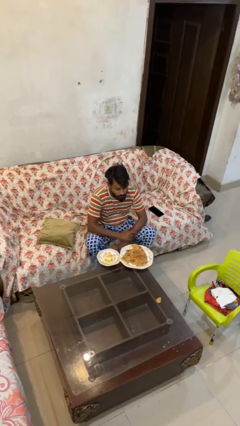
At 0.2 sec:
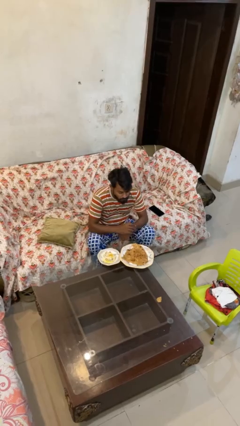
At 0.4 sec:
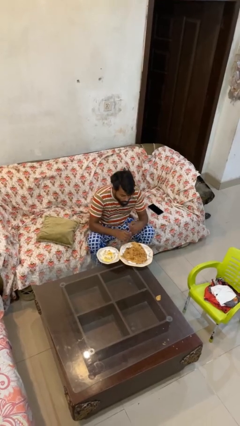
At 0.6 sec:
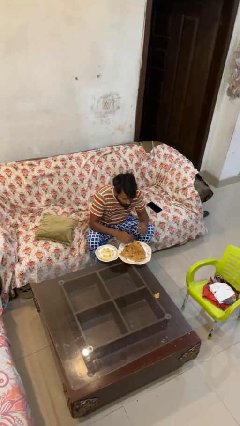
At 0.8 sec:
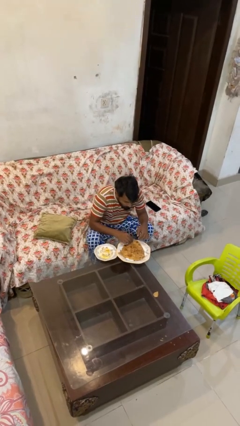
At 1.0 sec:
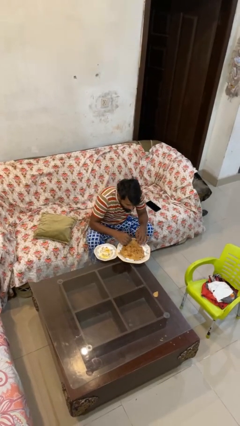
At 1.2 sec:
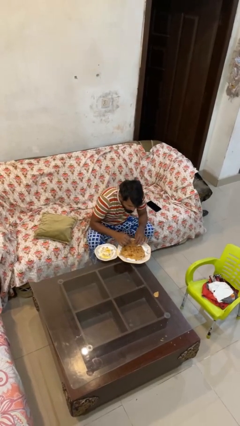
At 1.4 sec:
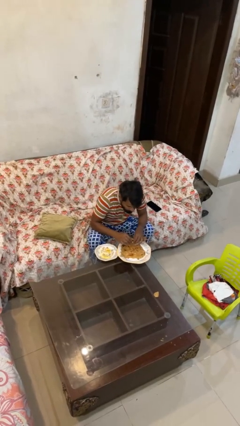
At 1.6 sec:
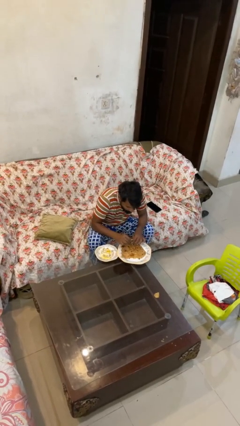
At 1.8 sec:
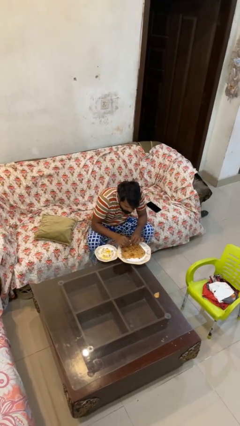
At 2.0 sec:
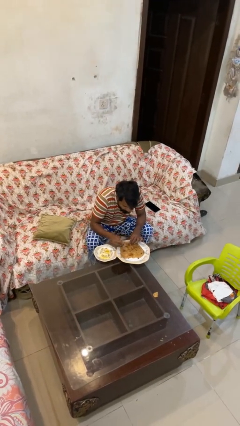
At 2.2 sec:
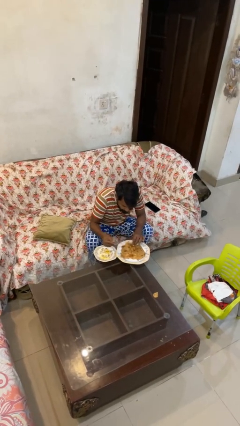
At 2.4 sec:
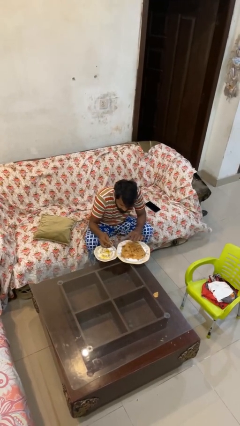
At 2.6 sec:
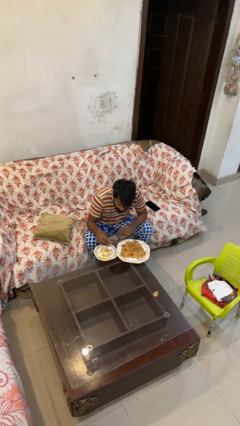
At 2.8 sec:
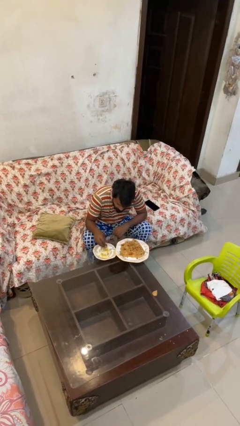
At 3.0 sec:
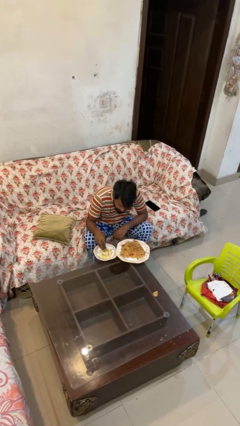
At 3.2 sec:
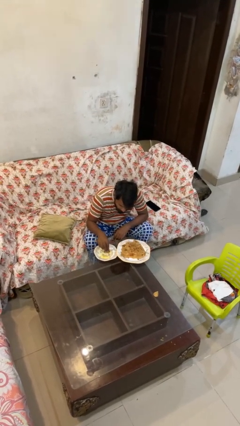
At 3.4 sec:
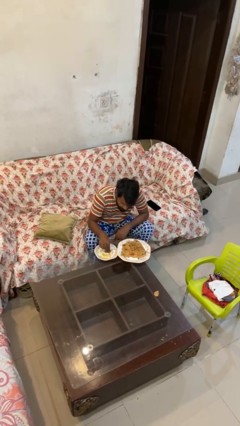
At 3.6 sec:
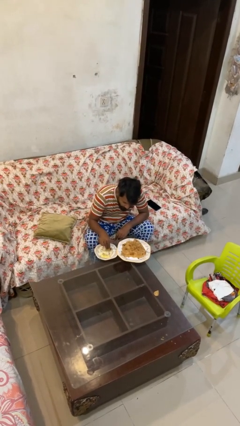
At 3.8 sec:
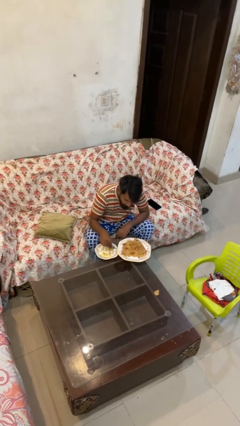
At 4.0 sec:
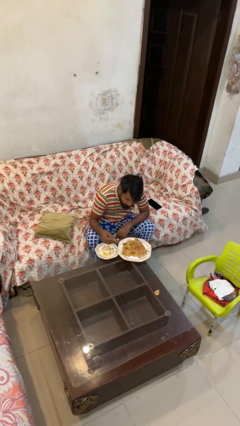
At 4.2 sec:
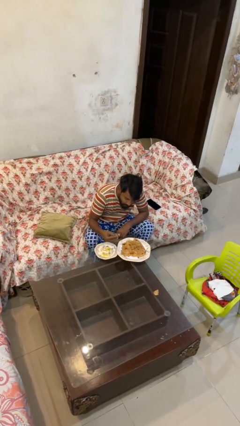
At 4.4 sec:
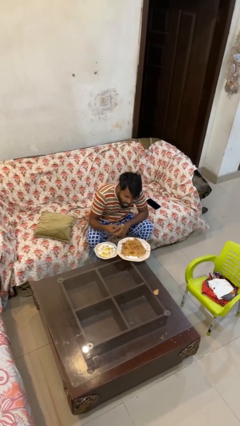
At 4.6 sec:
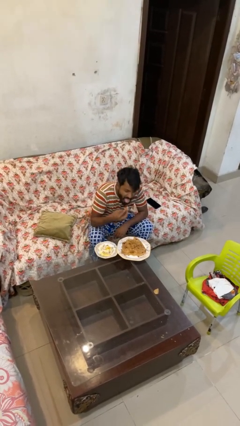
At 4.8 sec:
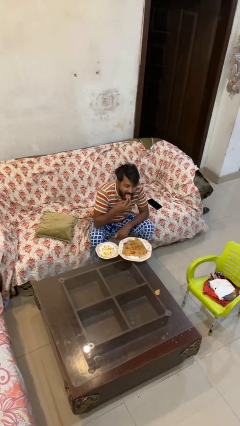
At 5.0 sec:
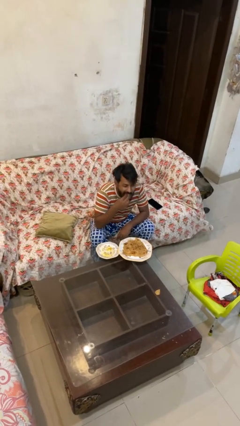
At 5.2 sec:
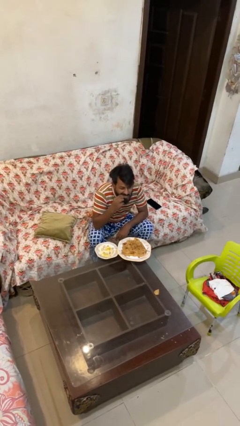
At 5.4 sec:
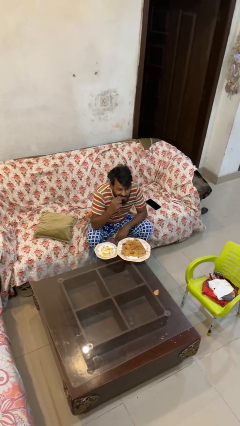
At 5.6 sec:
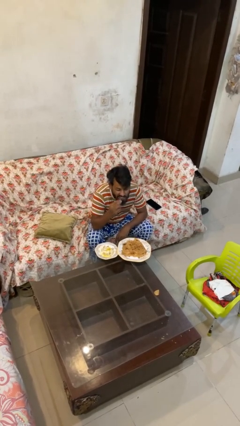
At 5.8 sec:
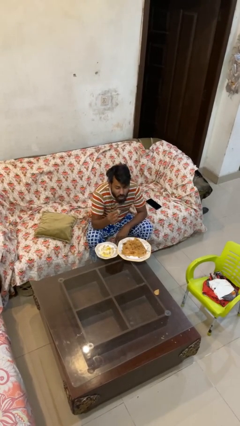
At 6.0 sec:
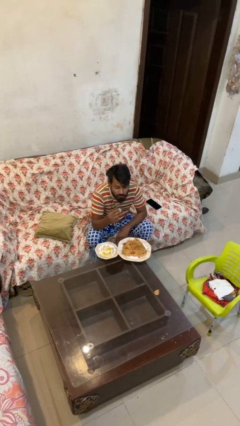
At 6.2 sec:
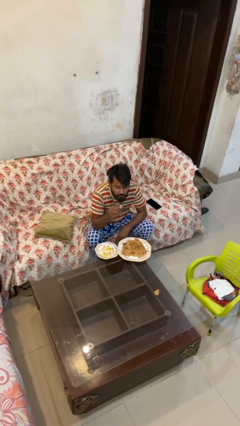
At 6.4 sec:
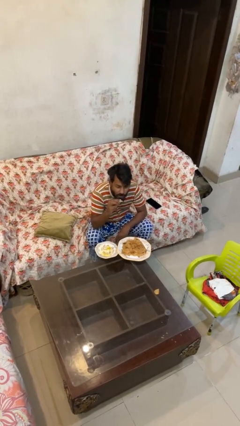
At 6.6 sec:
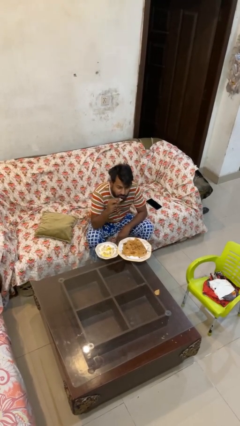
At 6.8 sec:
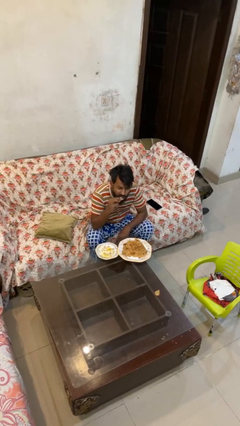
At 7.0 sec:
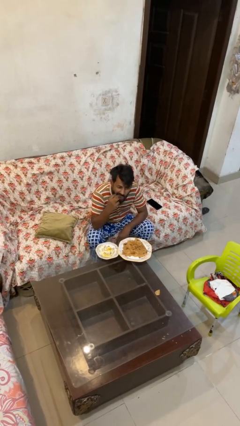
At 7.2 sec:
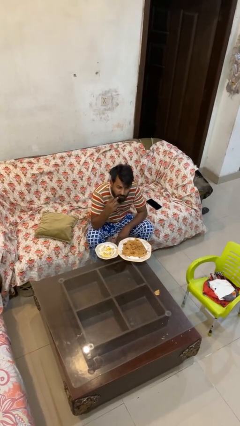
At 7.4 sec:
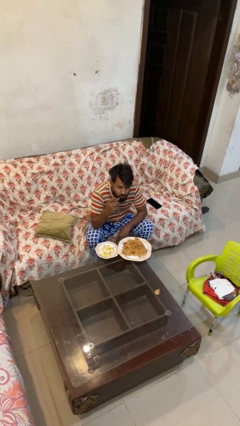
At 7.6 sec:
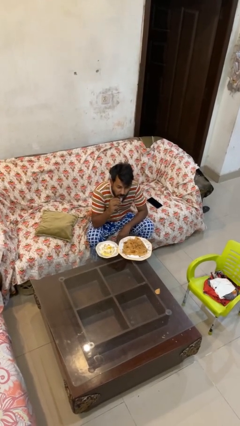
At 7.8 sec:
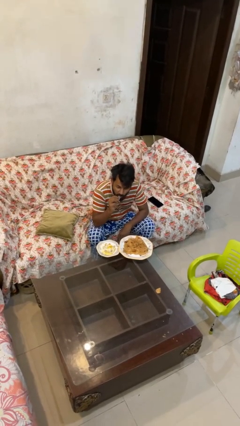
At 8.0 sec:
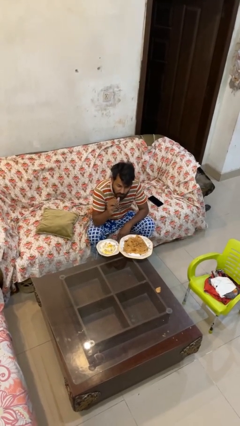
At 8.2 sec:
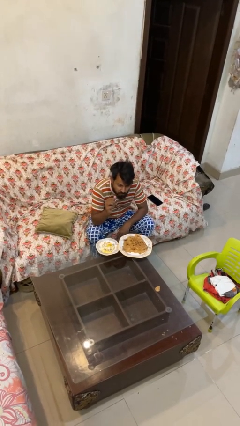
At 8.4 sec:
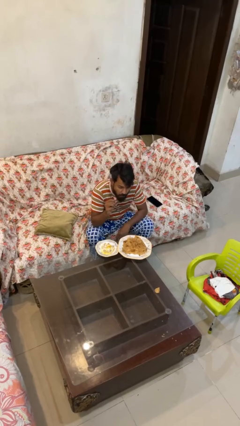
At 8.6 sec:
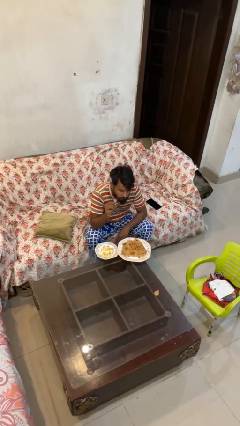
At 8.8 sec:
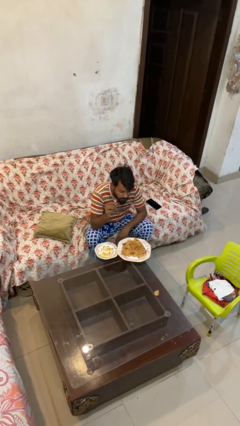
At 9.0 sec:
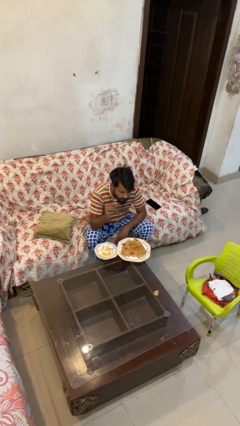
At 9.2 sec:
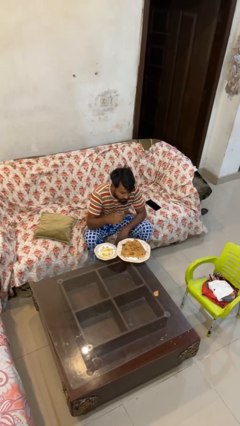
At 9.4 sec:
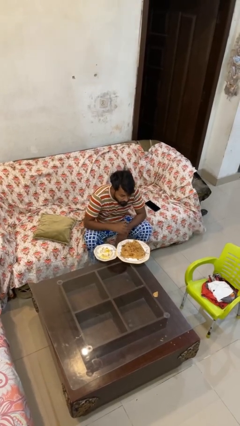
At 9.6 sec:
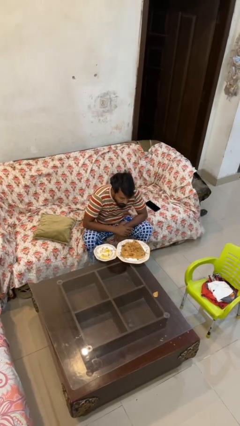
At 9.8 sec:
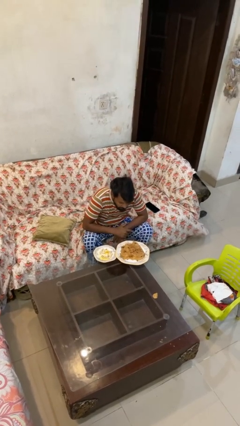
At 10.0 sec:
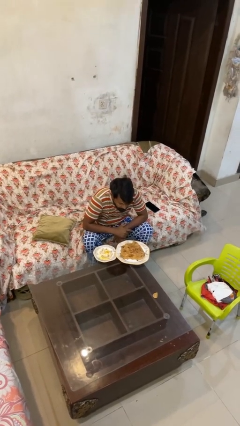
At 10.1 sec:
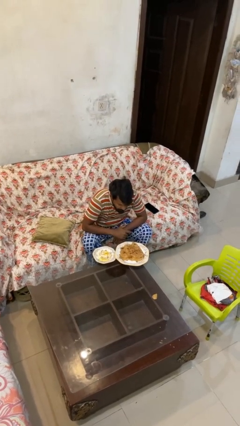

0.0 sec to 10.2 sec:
person eats with hands

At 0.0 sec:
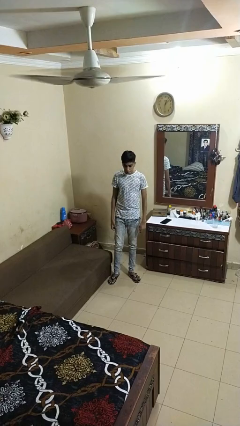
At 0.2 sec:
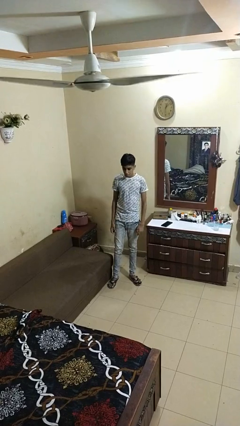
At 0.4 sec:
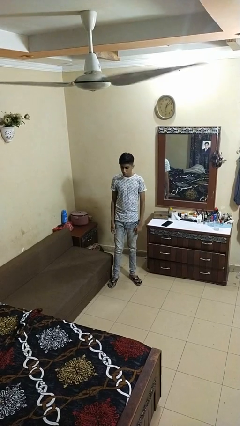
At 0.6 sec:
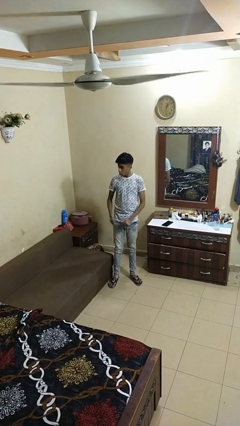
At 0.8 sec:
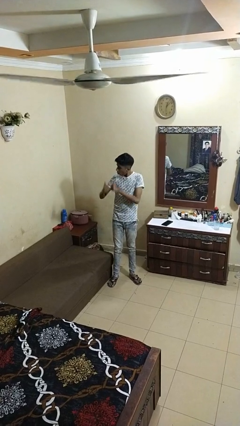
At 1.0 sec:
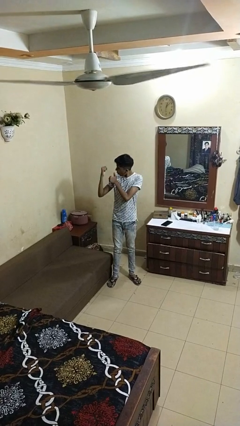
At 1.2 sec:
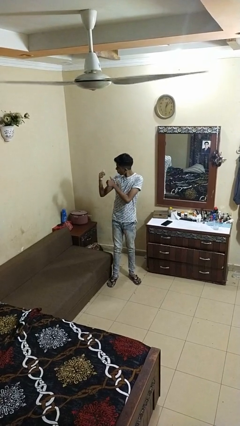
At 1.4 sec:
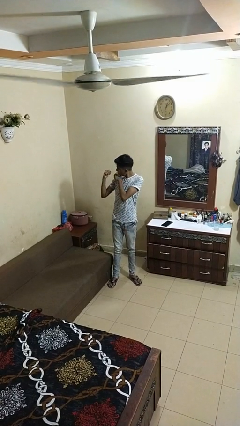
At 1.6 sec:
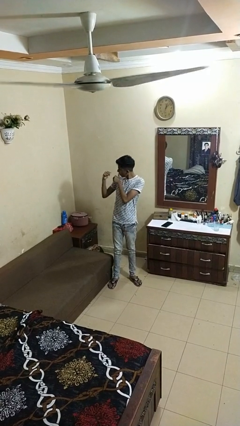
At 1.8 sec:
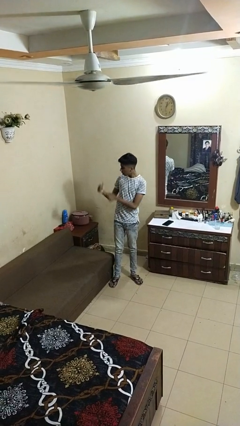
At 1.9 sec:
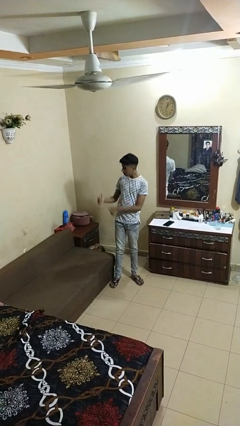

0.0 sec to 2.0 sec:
person gestures behind me

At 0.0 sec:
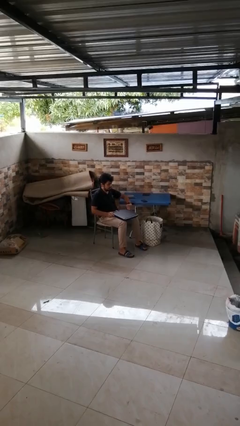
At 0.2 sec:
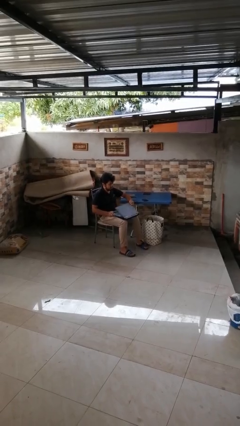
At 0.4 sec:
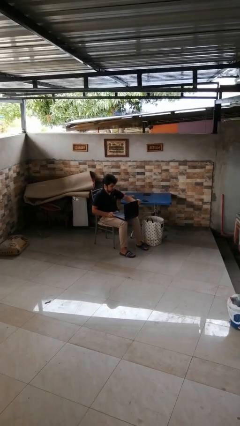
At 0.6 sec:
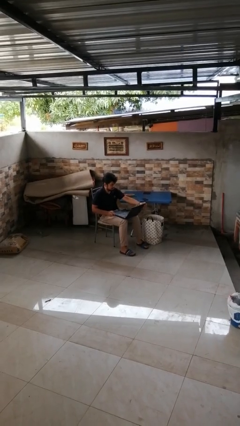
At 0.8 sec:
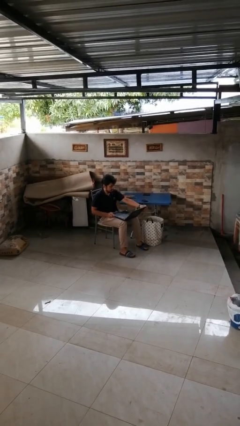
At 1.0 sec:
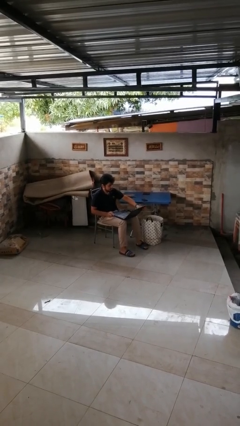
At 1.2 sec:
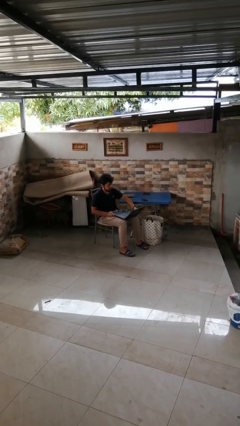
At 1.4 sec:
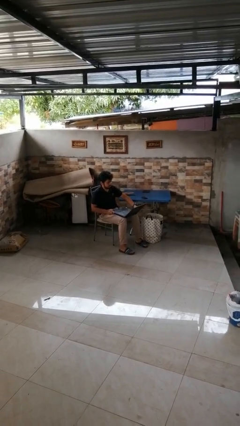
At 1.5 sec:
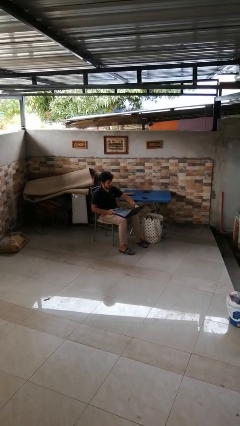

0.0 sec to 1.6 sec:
person opens laptop

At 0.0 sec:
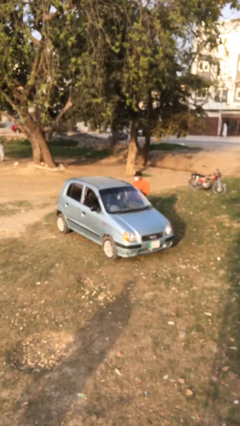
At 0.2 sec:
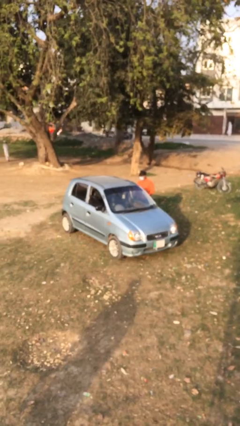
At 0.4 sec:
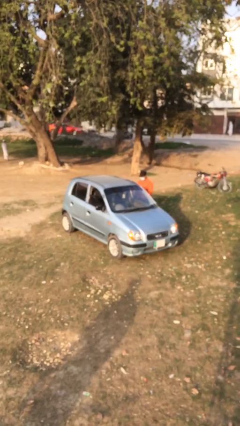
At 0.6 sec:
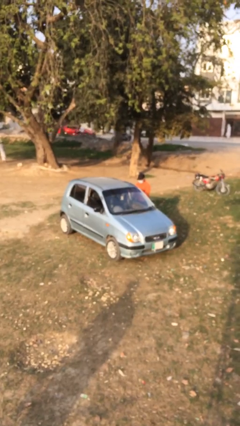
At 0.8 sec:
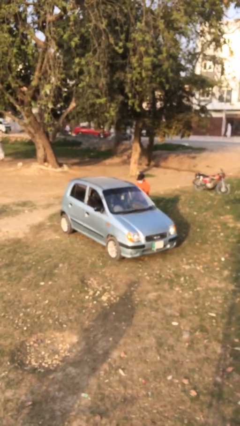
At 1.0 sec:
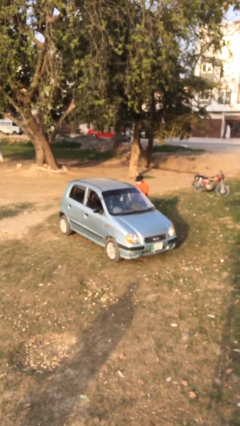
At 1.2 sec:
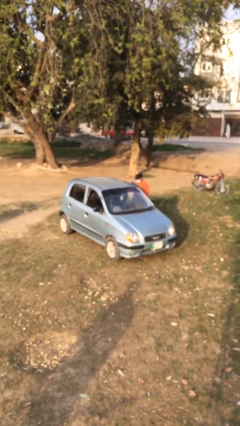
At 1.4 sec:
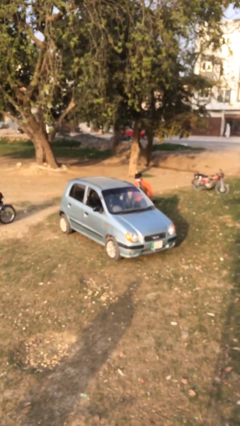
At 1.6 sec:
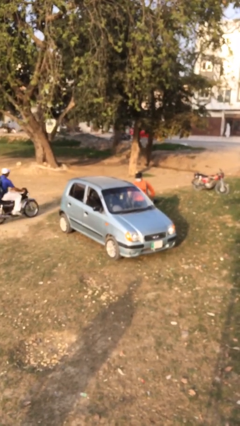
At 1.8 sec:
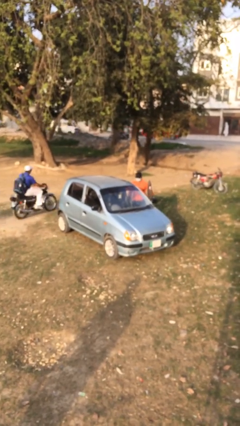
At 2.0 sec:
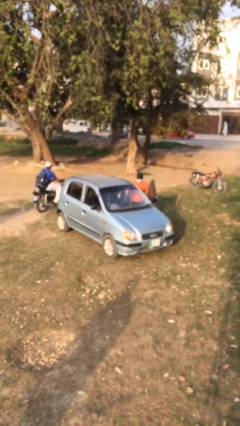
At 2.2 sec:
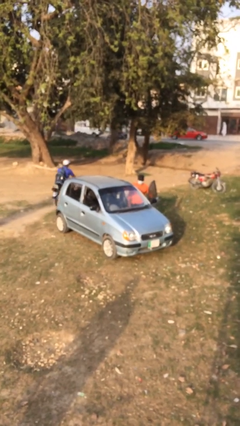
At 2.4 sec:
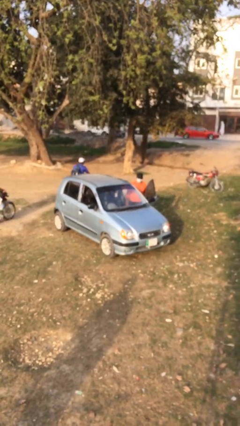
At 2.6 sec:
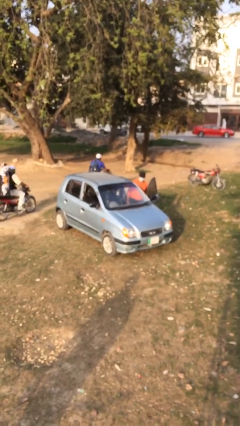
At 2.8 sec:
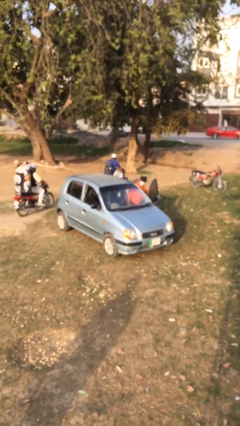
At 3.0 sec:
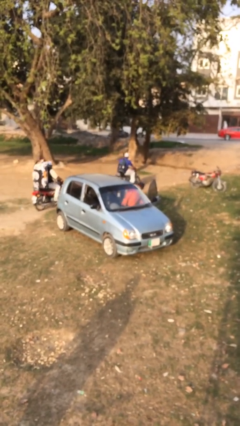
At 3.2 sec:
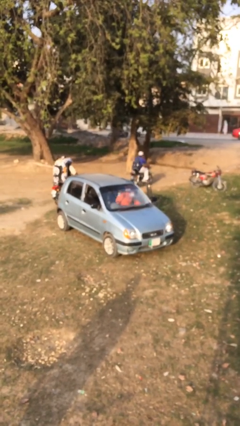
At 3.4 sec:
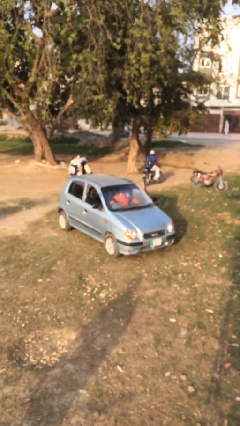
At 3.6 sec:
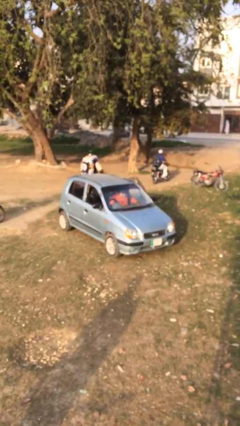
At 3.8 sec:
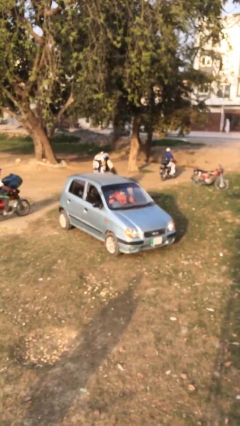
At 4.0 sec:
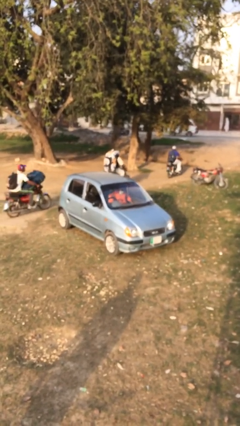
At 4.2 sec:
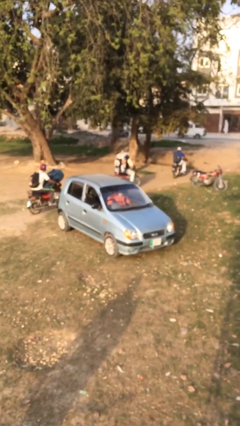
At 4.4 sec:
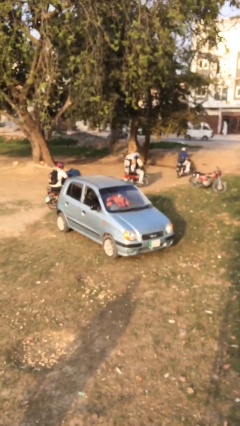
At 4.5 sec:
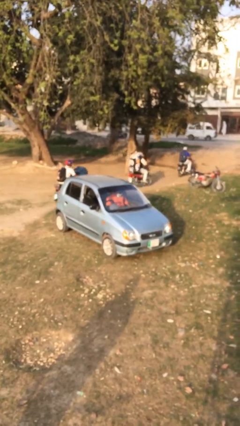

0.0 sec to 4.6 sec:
car picks up person
